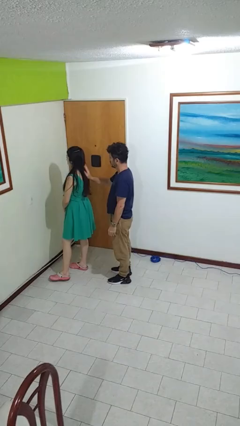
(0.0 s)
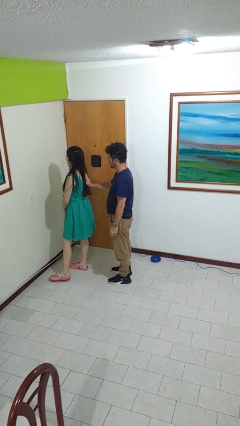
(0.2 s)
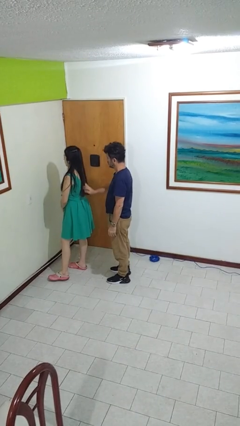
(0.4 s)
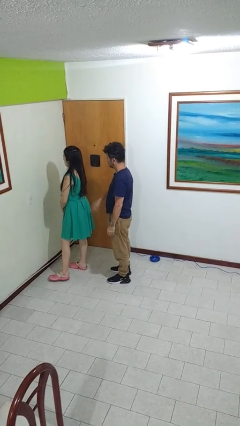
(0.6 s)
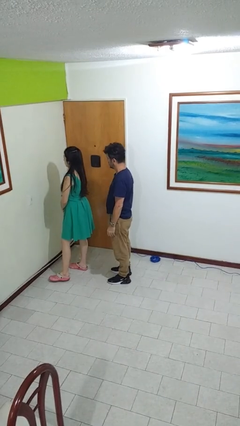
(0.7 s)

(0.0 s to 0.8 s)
person touches back of person

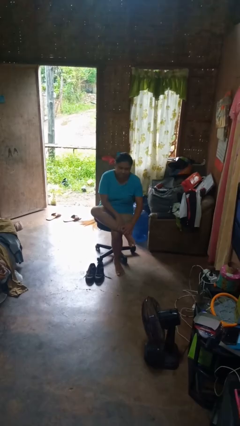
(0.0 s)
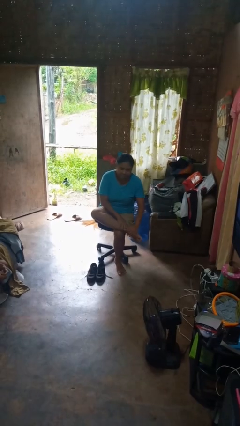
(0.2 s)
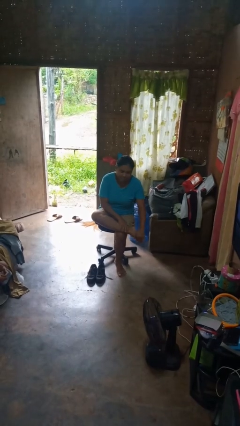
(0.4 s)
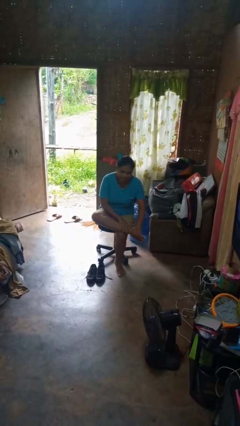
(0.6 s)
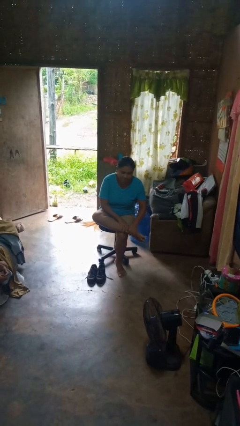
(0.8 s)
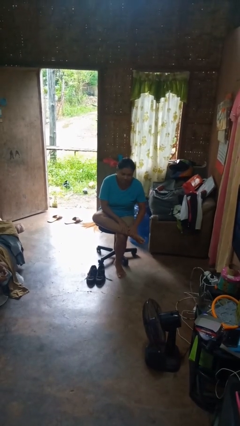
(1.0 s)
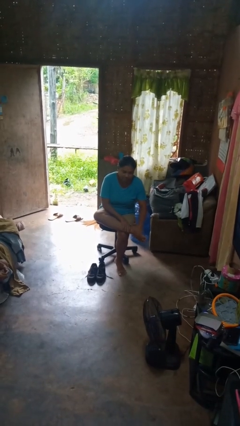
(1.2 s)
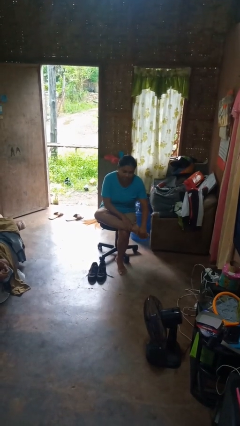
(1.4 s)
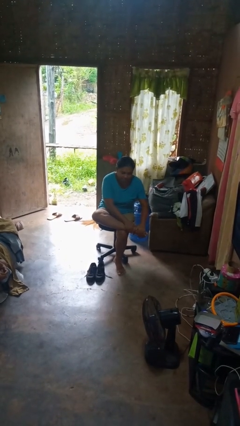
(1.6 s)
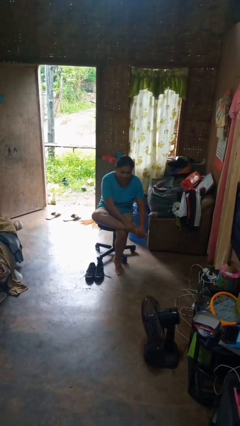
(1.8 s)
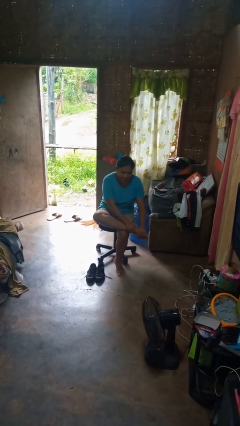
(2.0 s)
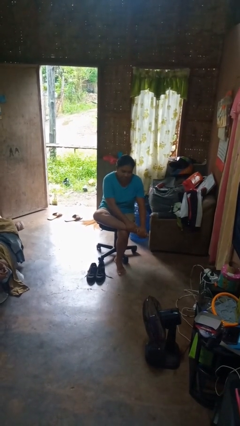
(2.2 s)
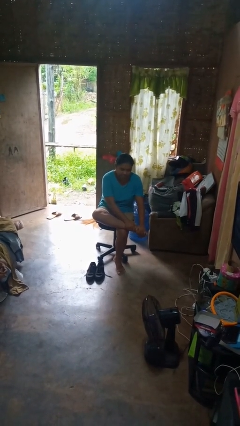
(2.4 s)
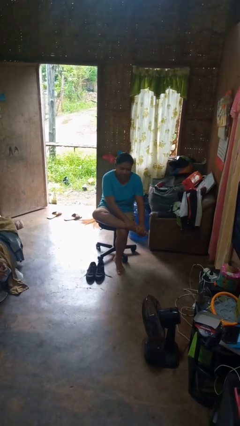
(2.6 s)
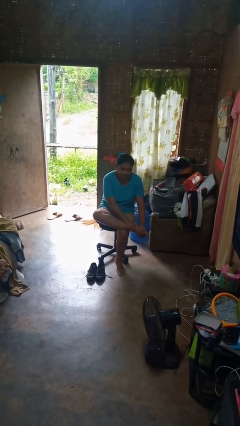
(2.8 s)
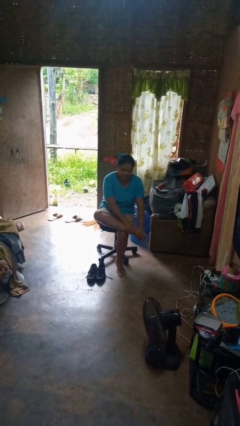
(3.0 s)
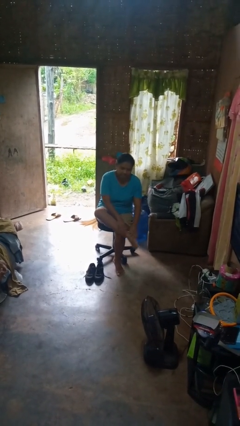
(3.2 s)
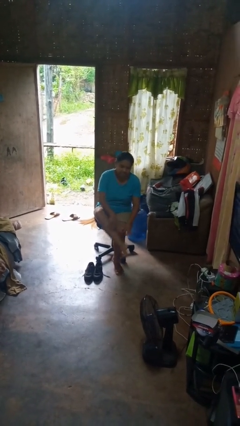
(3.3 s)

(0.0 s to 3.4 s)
person rubs foot

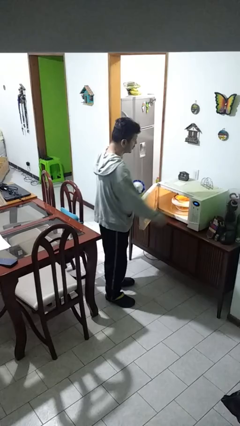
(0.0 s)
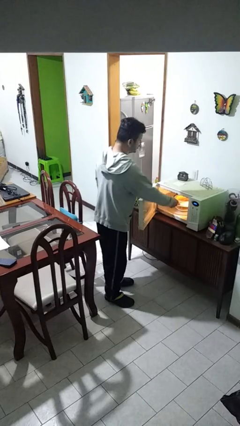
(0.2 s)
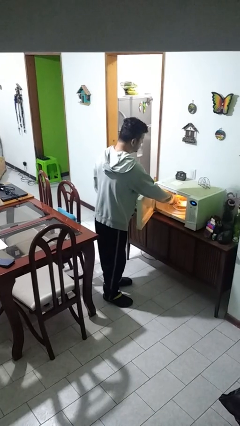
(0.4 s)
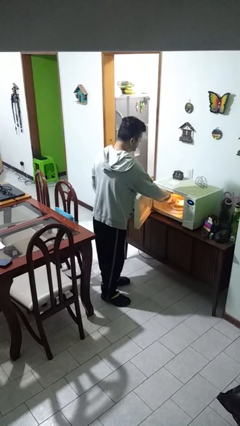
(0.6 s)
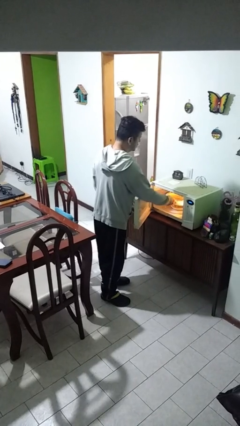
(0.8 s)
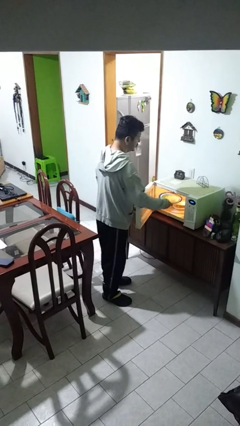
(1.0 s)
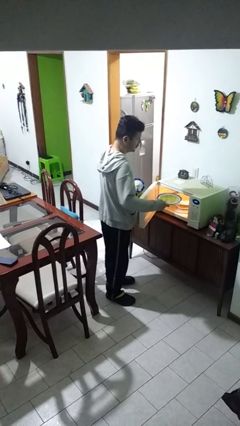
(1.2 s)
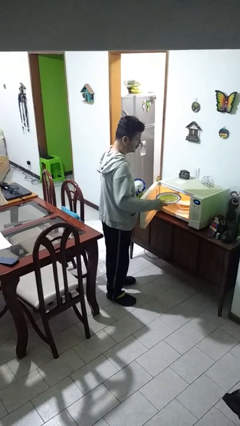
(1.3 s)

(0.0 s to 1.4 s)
person takes object from microwave

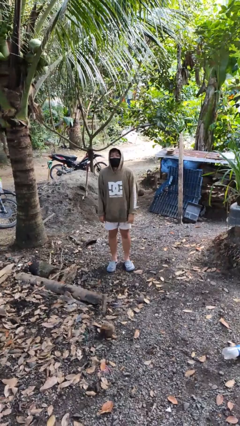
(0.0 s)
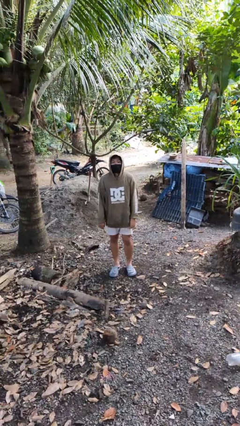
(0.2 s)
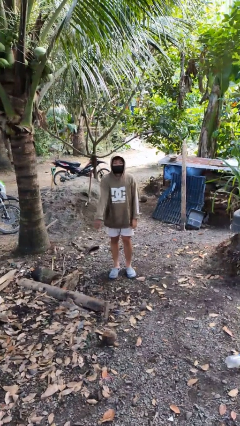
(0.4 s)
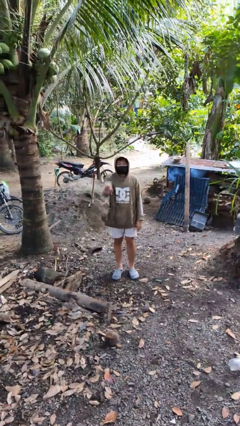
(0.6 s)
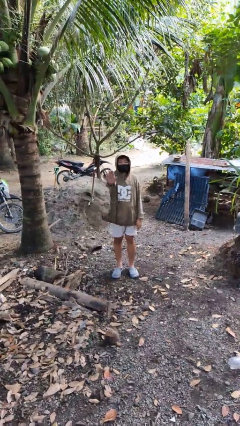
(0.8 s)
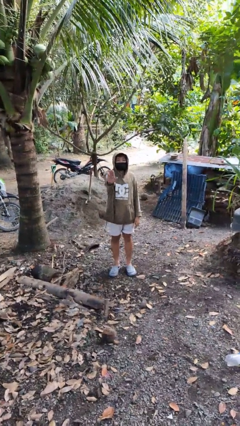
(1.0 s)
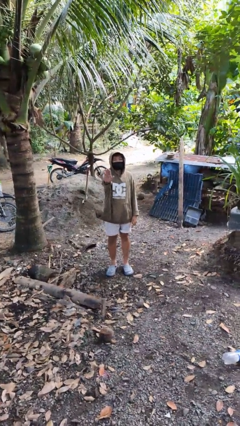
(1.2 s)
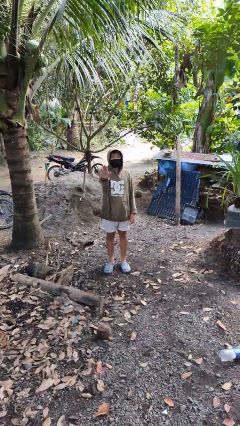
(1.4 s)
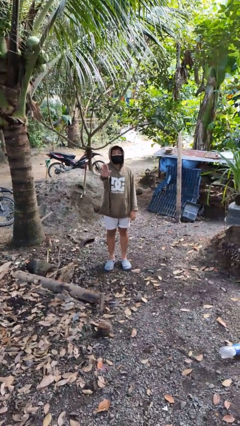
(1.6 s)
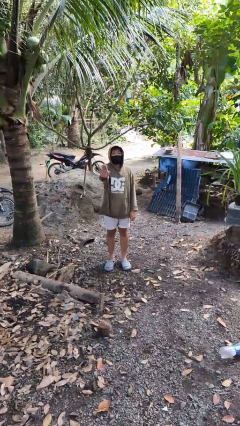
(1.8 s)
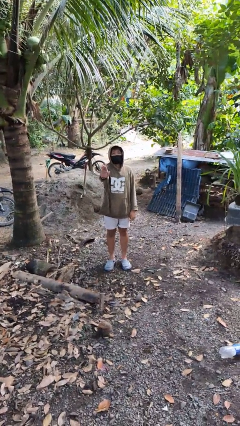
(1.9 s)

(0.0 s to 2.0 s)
person gestures stop

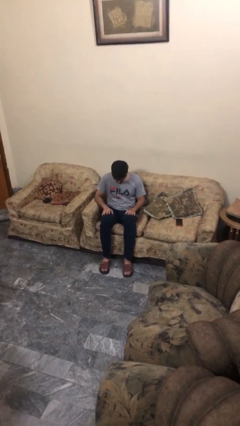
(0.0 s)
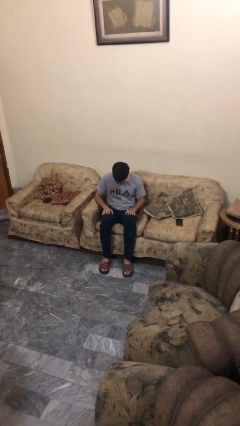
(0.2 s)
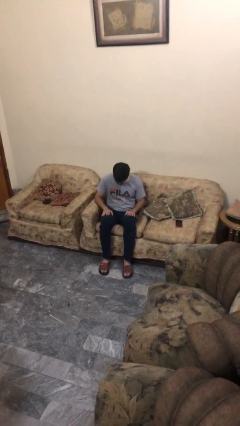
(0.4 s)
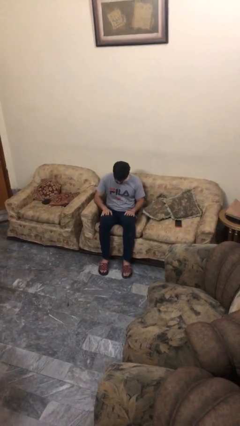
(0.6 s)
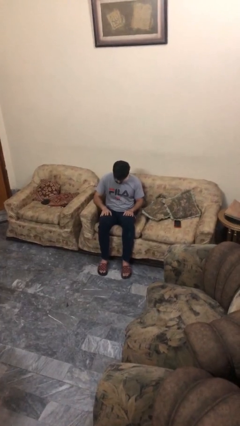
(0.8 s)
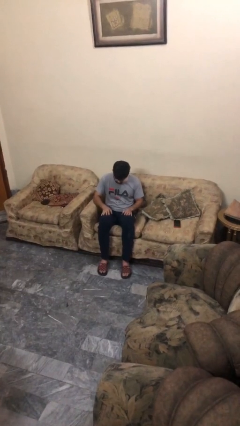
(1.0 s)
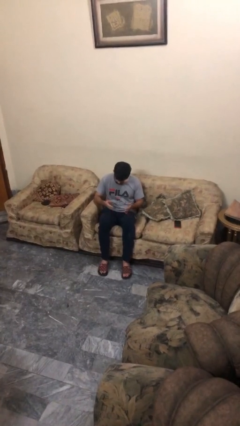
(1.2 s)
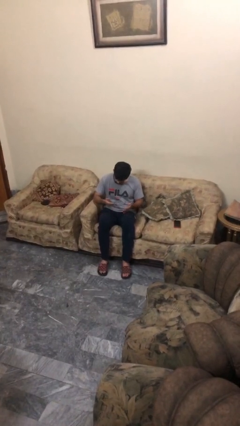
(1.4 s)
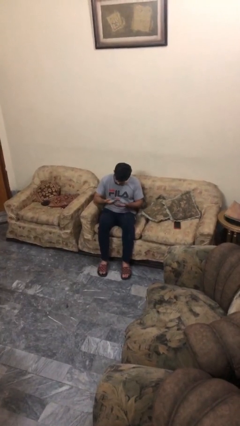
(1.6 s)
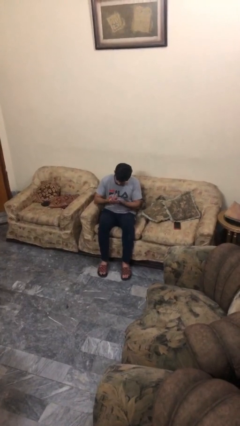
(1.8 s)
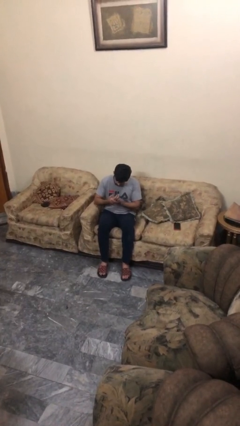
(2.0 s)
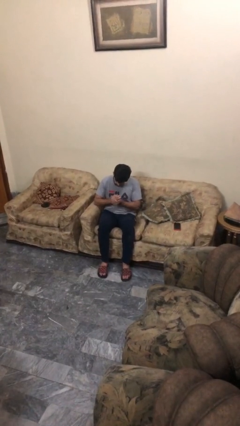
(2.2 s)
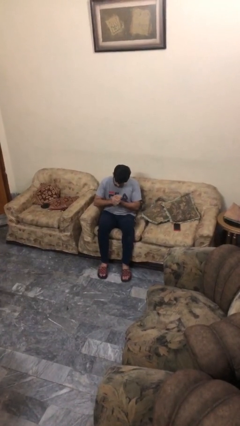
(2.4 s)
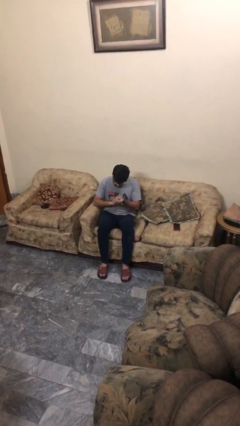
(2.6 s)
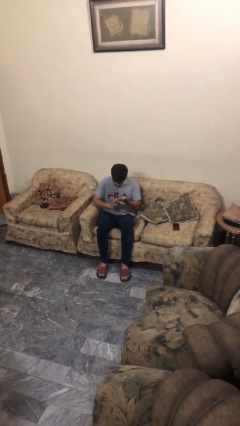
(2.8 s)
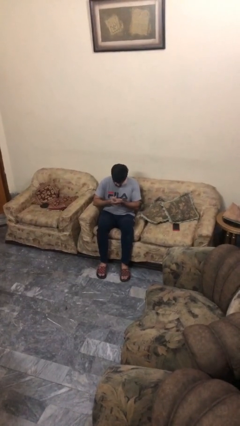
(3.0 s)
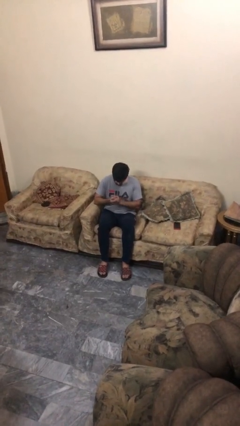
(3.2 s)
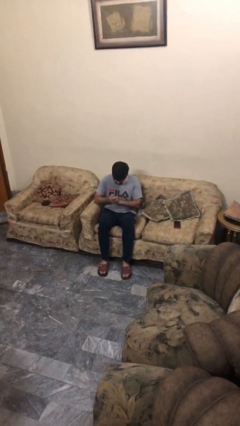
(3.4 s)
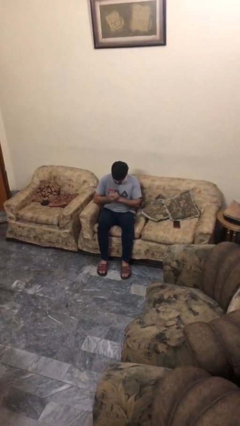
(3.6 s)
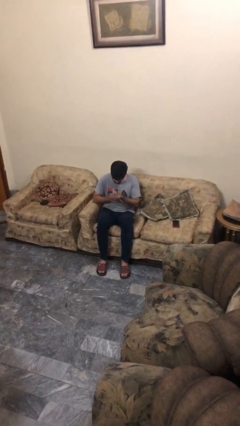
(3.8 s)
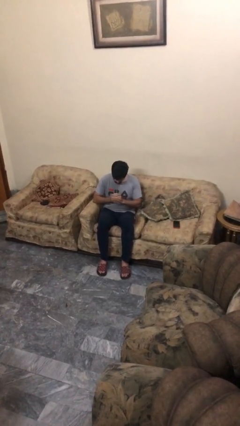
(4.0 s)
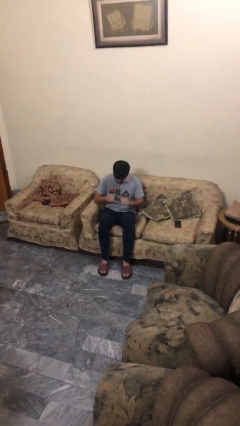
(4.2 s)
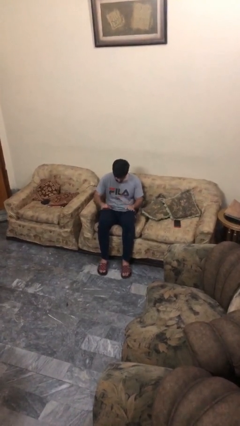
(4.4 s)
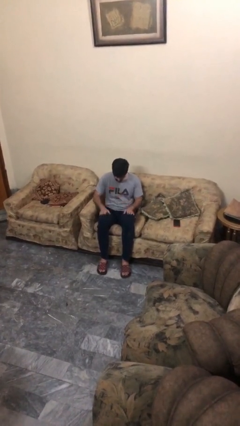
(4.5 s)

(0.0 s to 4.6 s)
person looks at hands in lap

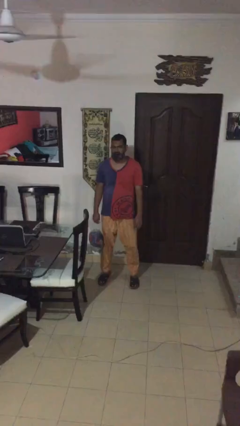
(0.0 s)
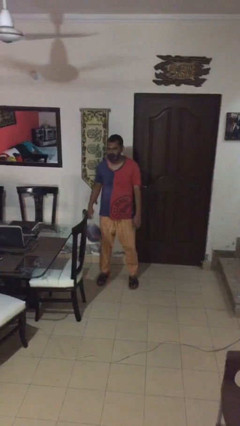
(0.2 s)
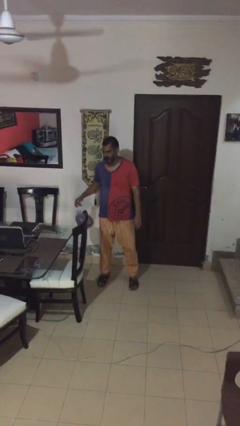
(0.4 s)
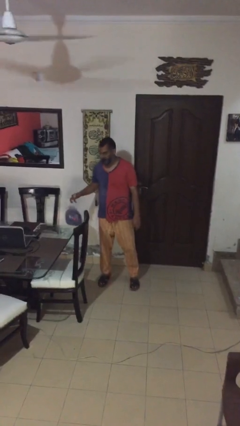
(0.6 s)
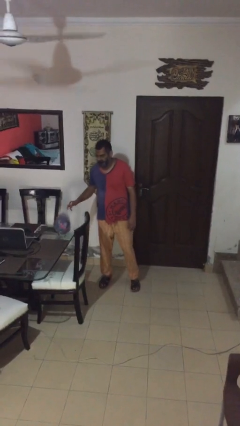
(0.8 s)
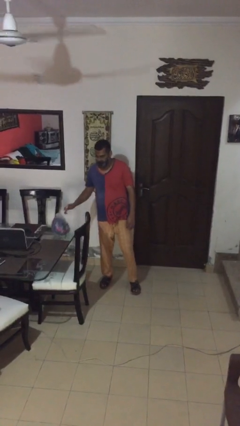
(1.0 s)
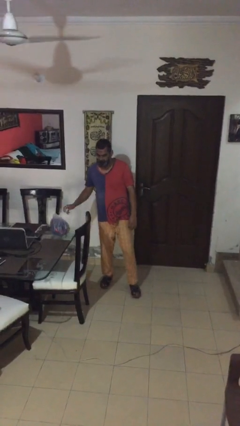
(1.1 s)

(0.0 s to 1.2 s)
person puts down object on table

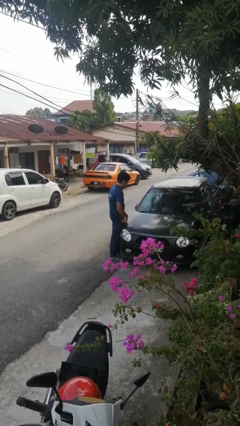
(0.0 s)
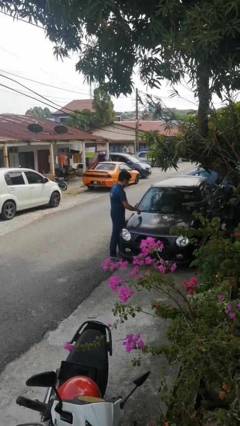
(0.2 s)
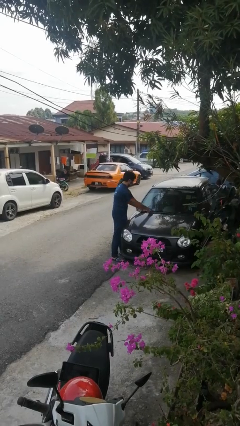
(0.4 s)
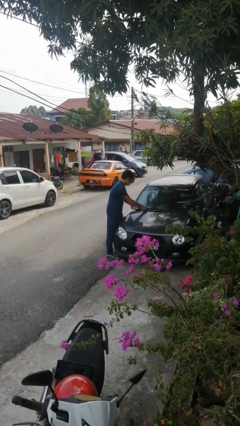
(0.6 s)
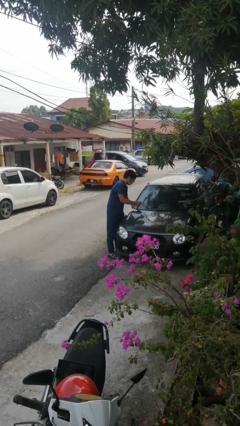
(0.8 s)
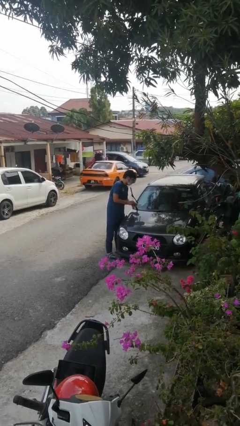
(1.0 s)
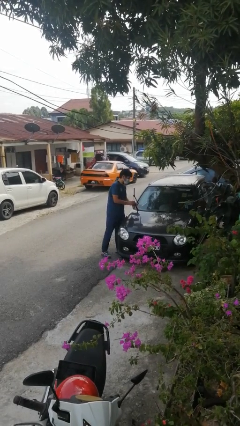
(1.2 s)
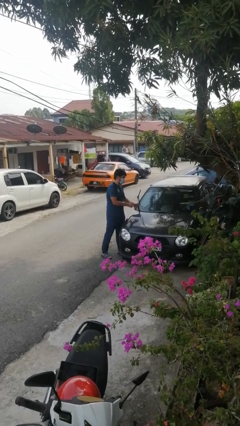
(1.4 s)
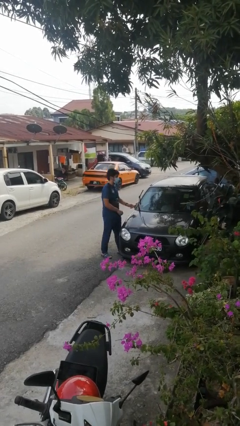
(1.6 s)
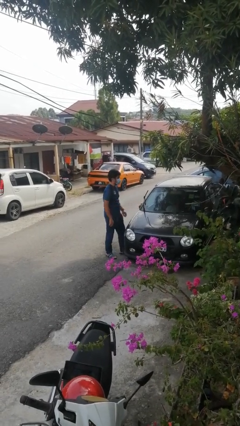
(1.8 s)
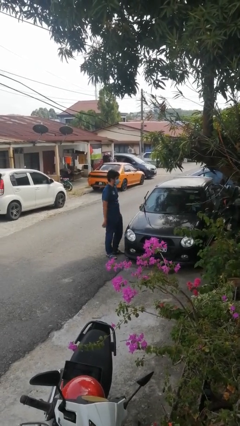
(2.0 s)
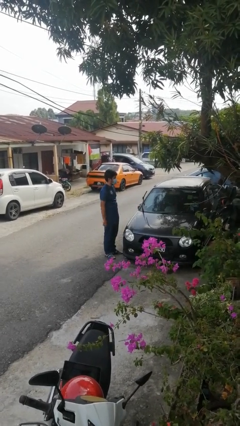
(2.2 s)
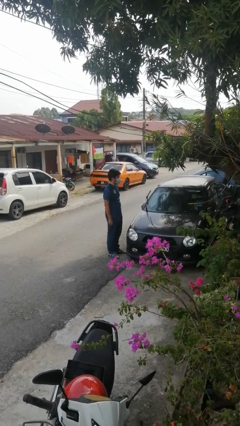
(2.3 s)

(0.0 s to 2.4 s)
person flips up car wipers

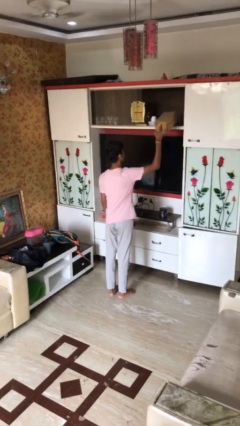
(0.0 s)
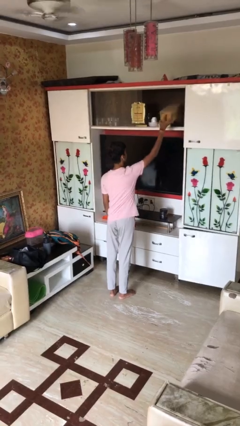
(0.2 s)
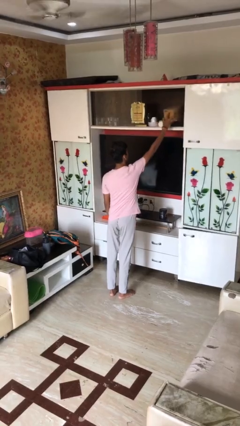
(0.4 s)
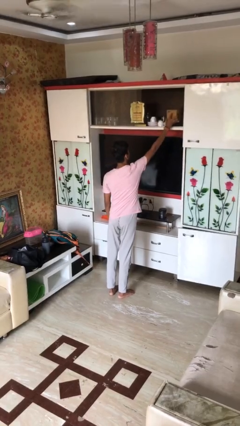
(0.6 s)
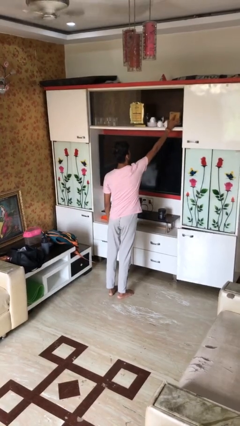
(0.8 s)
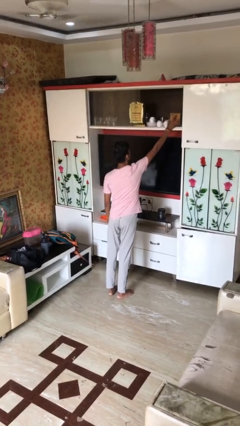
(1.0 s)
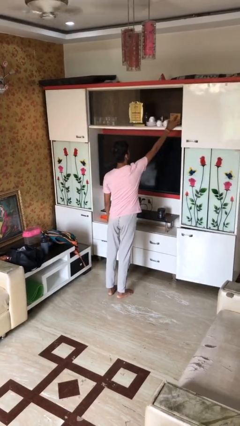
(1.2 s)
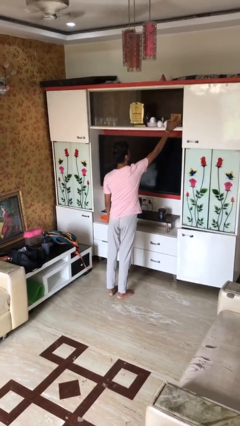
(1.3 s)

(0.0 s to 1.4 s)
person puts down object on shelf
